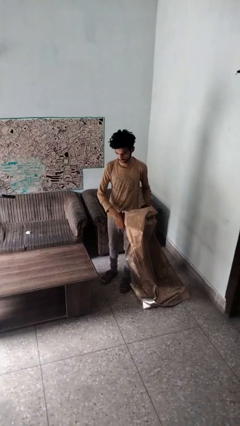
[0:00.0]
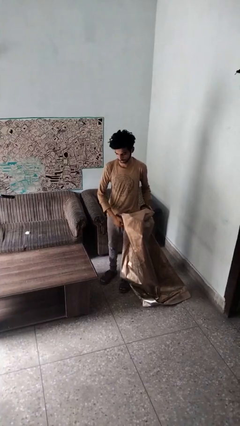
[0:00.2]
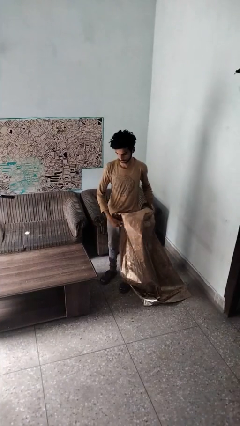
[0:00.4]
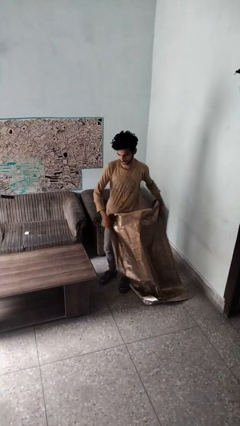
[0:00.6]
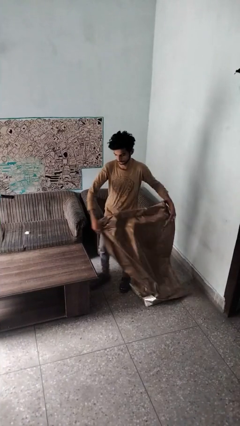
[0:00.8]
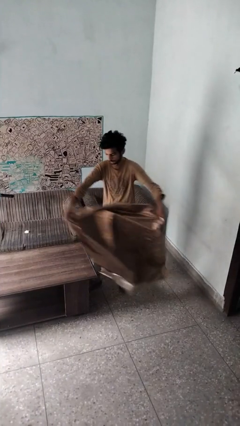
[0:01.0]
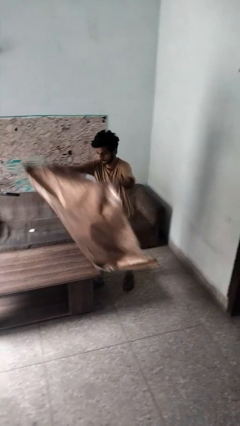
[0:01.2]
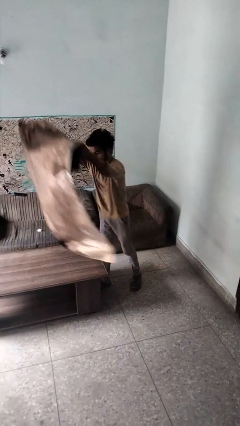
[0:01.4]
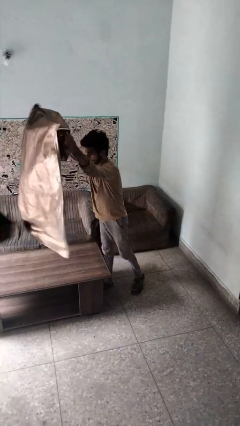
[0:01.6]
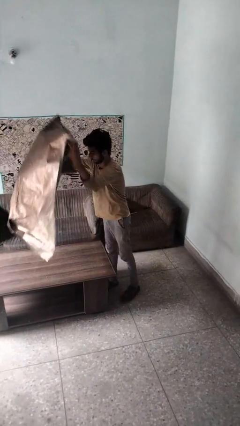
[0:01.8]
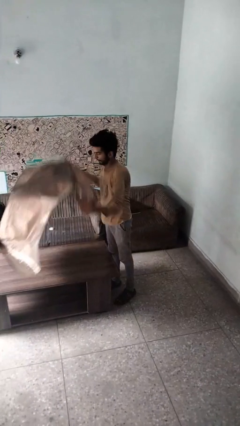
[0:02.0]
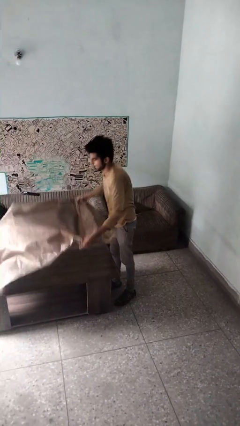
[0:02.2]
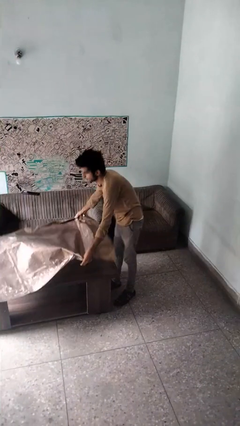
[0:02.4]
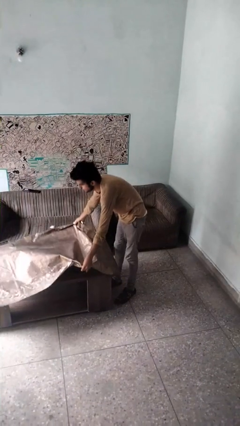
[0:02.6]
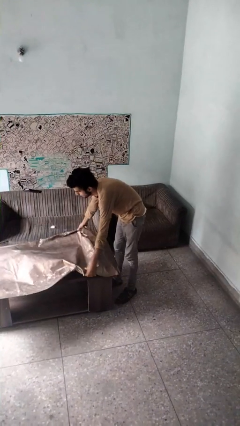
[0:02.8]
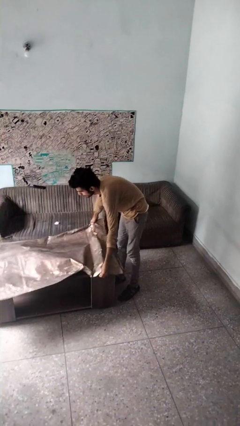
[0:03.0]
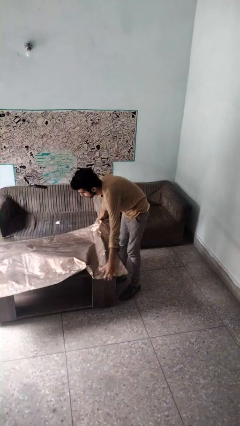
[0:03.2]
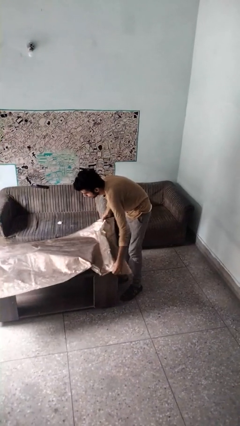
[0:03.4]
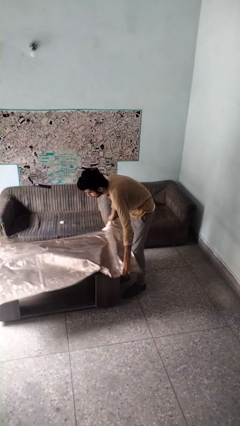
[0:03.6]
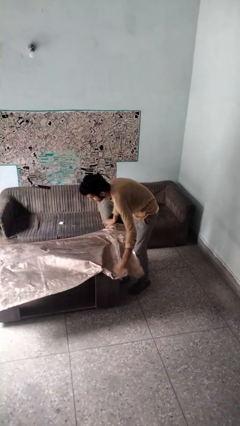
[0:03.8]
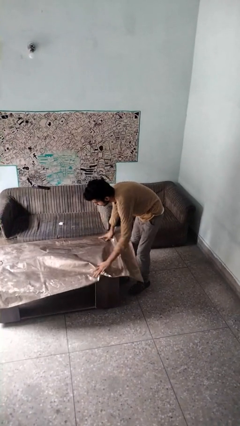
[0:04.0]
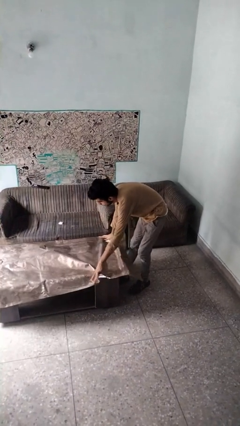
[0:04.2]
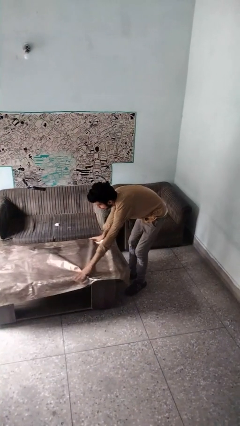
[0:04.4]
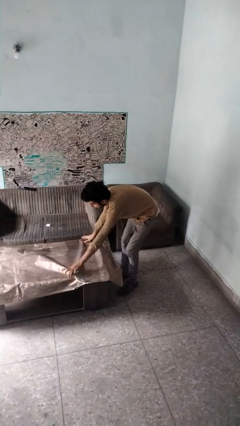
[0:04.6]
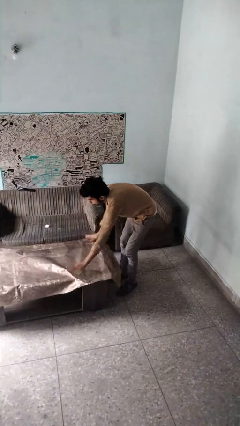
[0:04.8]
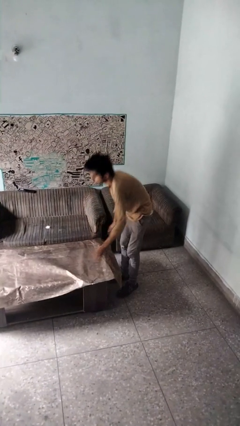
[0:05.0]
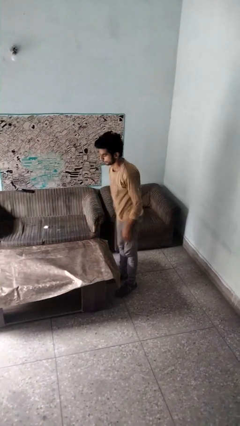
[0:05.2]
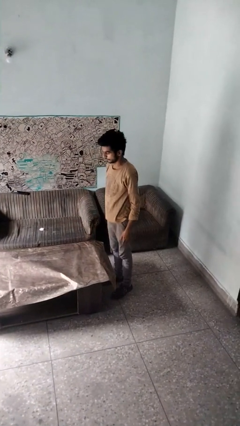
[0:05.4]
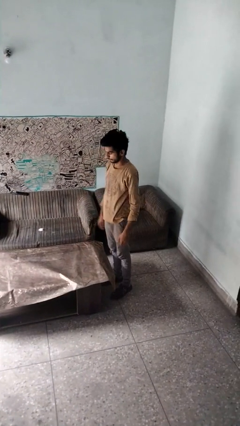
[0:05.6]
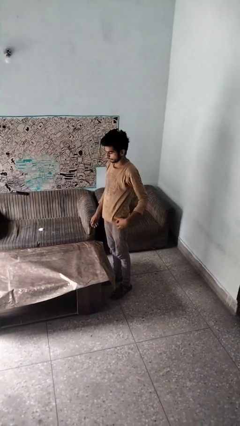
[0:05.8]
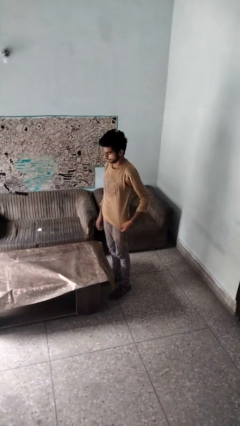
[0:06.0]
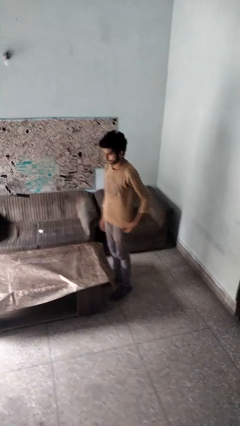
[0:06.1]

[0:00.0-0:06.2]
person spreads tablecloth

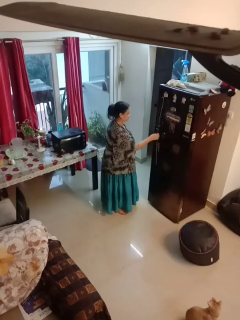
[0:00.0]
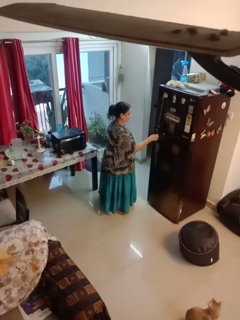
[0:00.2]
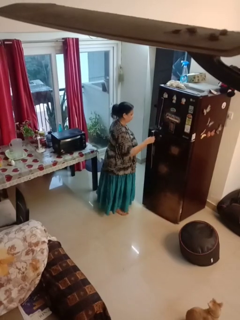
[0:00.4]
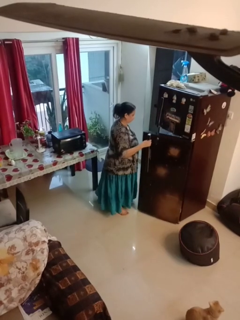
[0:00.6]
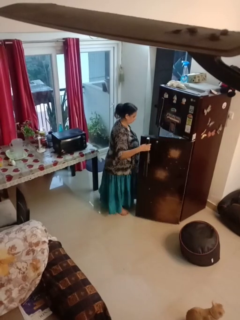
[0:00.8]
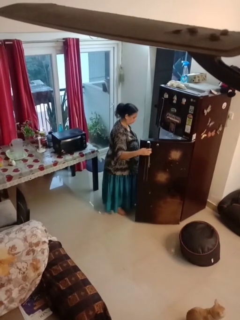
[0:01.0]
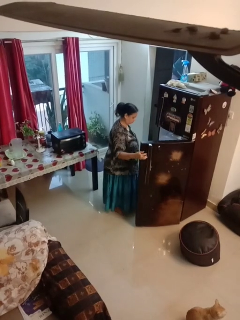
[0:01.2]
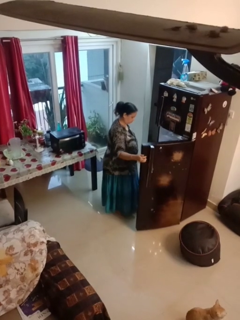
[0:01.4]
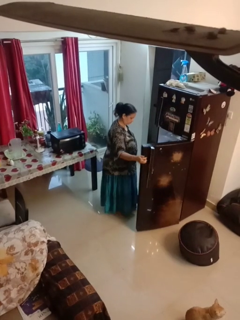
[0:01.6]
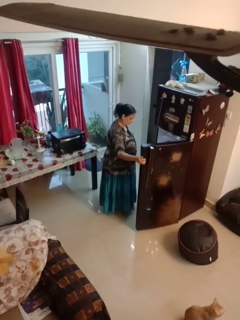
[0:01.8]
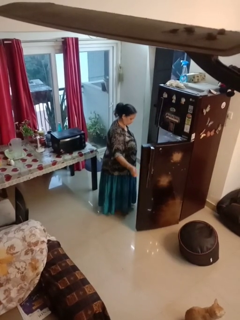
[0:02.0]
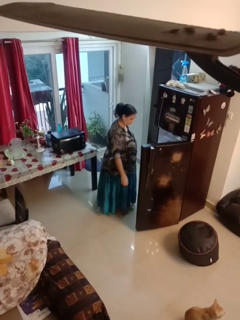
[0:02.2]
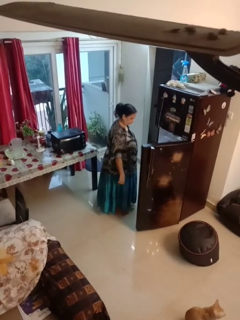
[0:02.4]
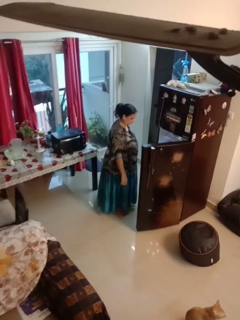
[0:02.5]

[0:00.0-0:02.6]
person opens refrigerator

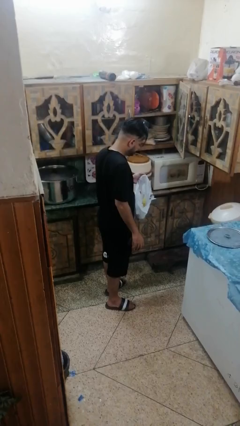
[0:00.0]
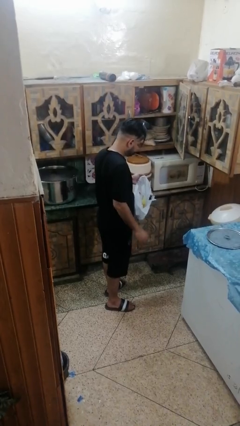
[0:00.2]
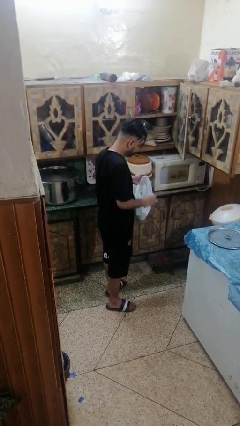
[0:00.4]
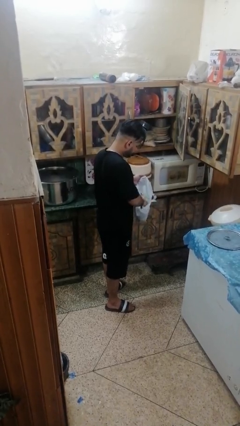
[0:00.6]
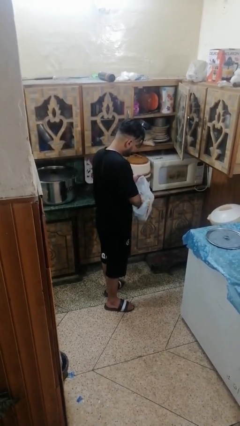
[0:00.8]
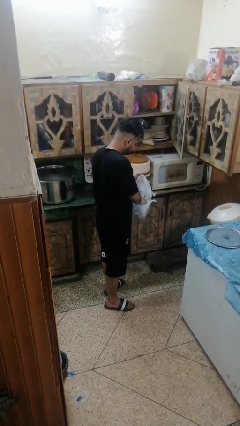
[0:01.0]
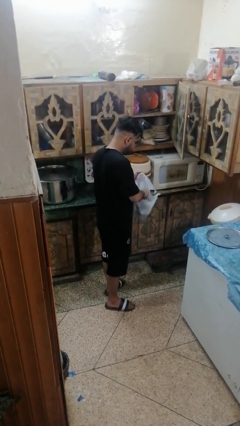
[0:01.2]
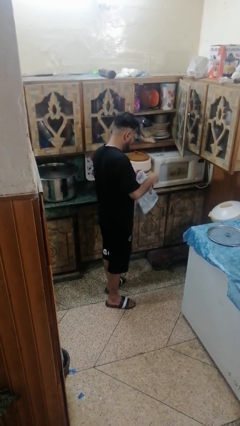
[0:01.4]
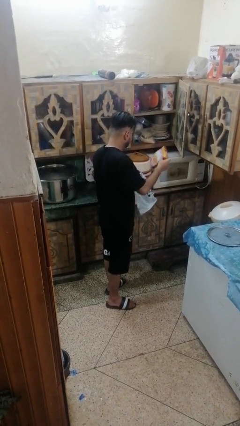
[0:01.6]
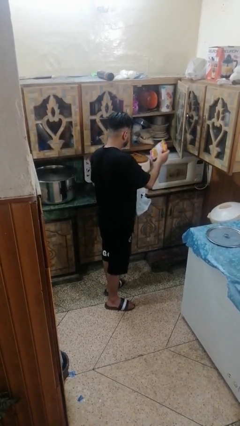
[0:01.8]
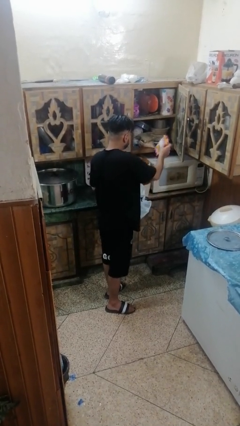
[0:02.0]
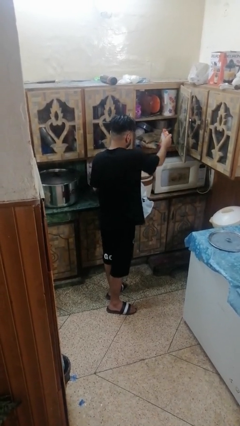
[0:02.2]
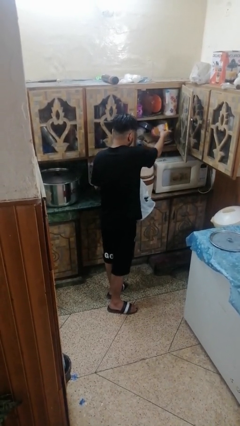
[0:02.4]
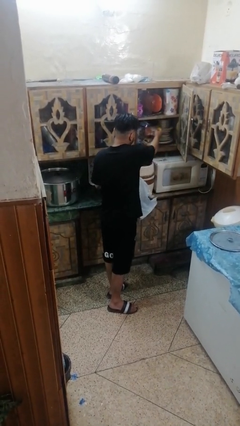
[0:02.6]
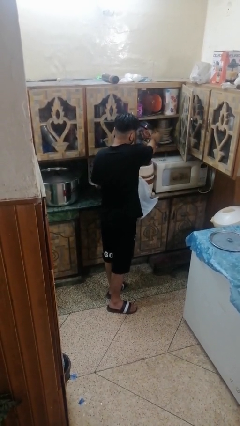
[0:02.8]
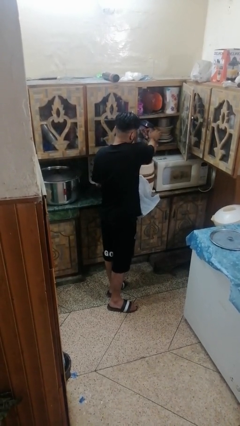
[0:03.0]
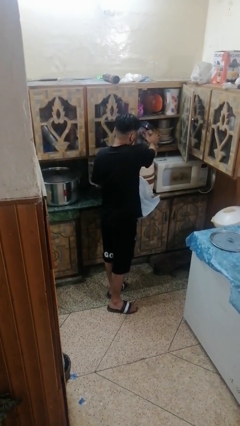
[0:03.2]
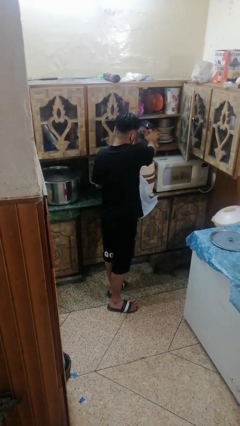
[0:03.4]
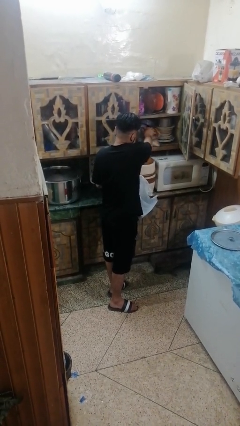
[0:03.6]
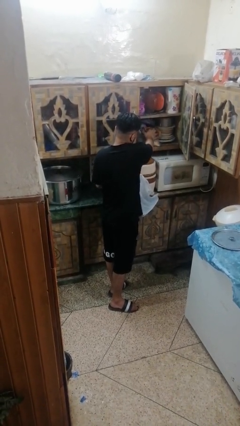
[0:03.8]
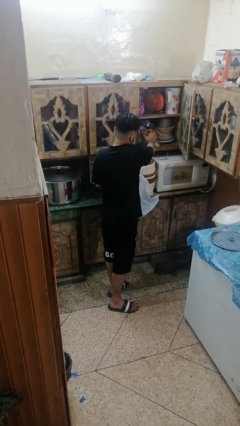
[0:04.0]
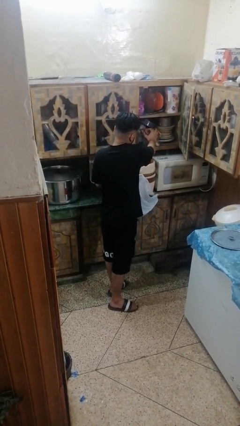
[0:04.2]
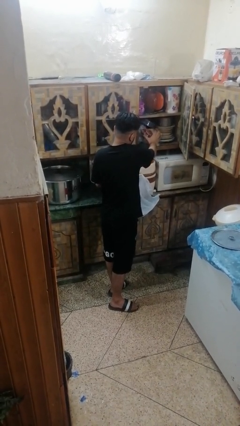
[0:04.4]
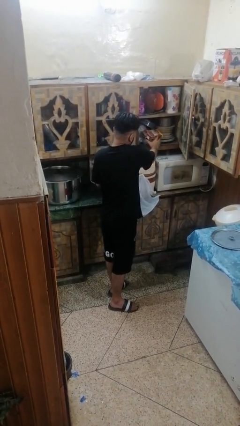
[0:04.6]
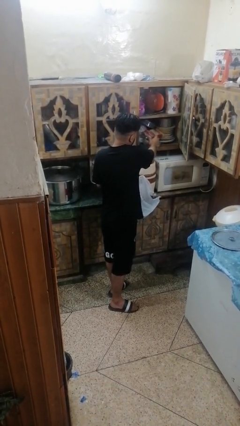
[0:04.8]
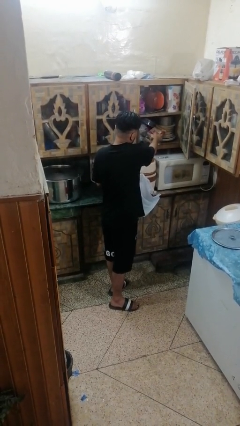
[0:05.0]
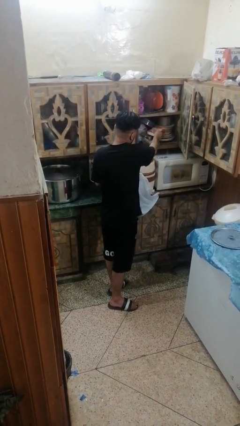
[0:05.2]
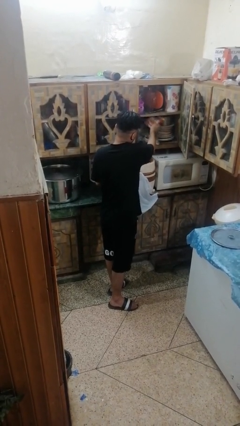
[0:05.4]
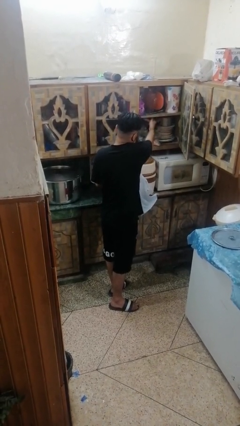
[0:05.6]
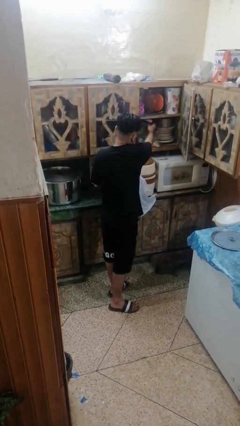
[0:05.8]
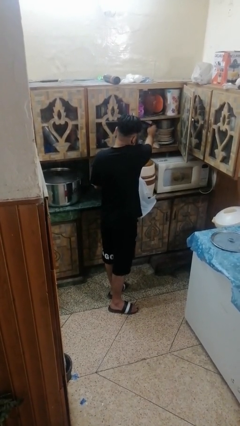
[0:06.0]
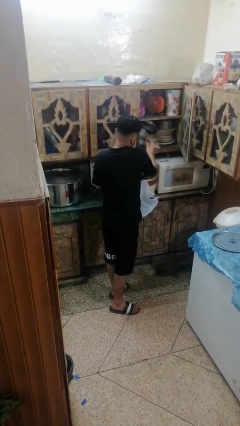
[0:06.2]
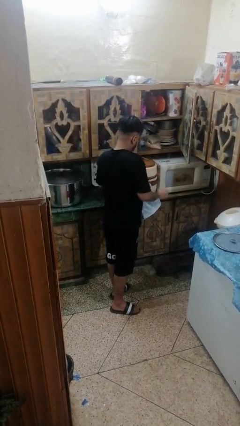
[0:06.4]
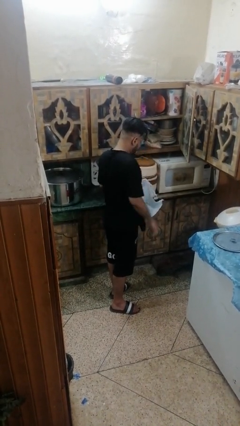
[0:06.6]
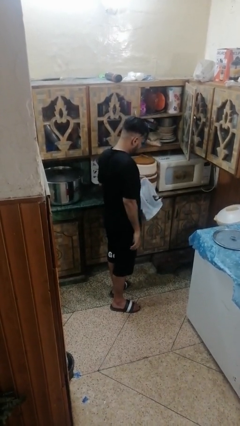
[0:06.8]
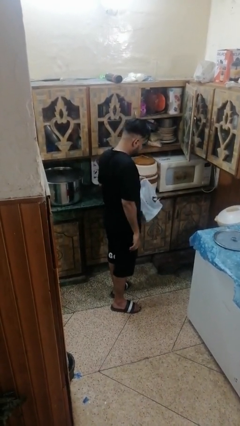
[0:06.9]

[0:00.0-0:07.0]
person loads groceries into cabinet

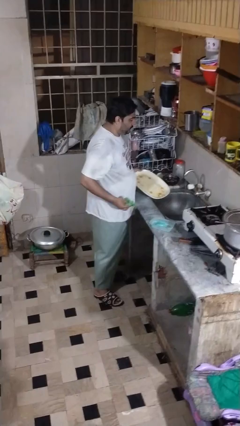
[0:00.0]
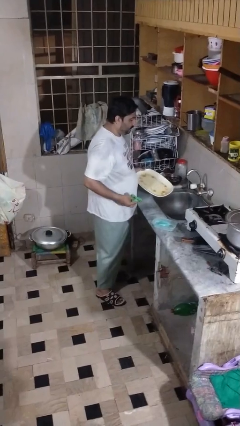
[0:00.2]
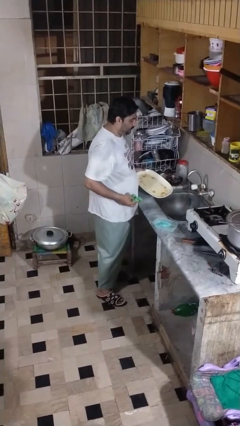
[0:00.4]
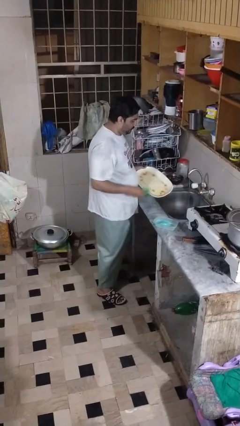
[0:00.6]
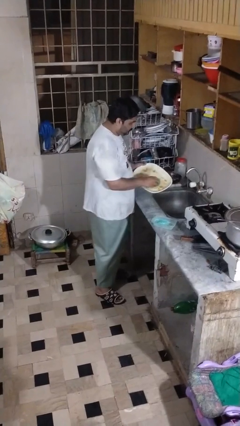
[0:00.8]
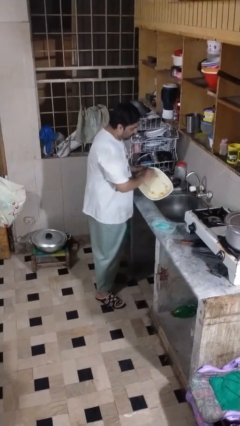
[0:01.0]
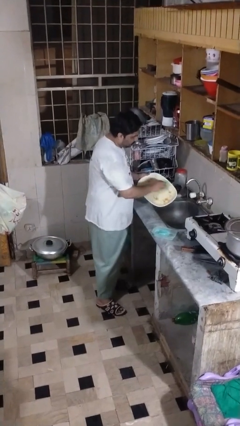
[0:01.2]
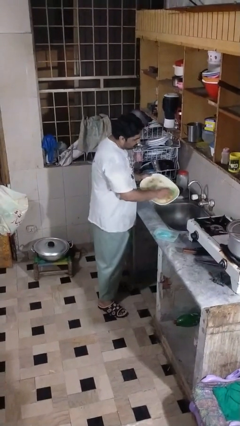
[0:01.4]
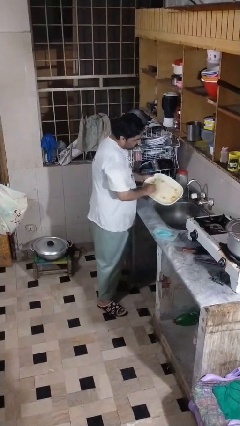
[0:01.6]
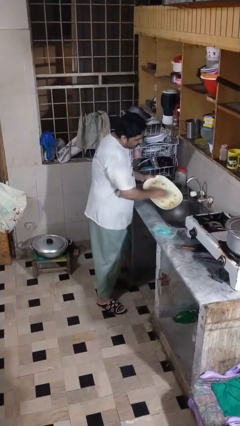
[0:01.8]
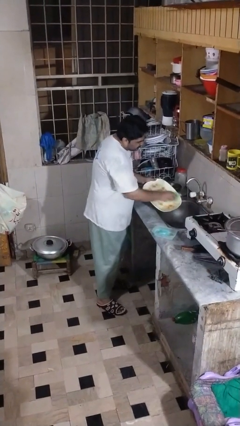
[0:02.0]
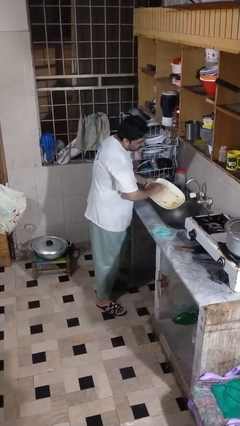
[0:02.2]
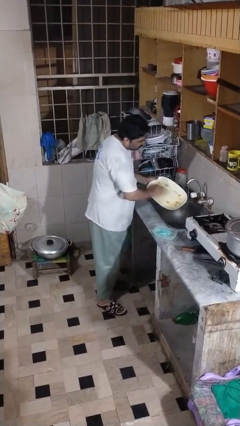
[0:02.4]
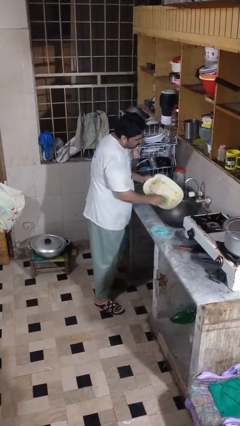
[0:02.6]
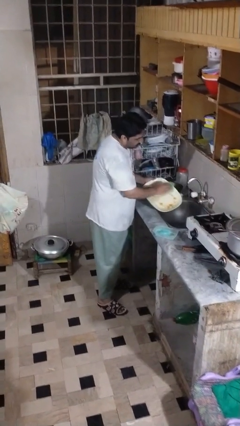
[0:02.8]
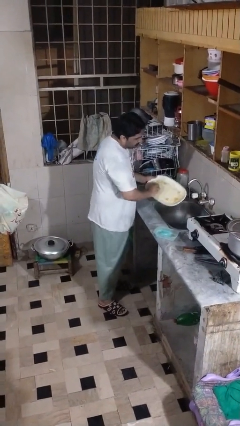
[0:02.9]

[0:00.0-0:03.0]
person washes dish
